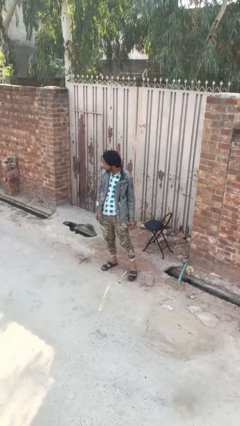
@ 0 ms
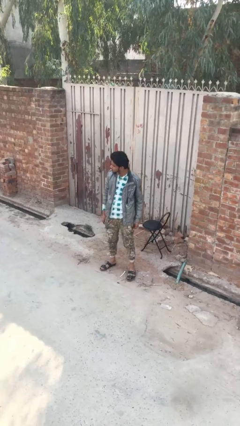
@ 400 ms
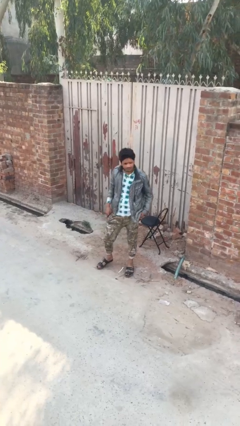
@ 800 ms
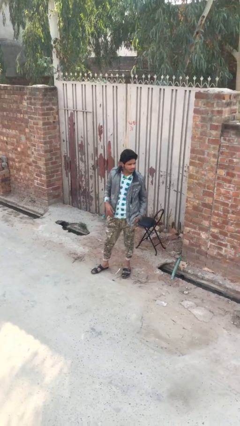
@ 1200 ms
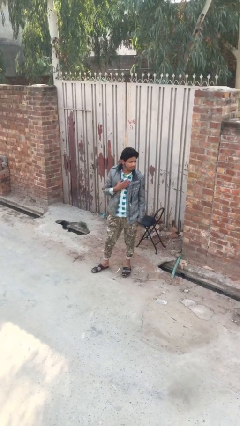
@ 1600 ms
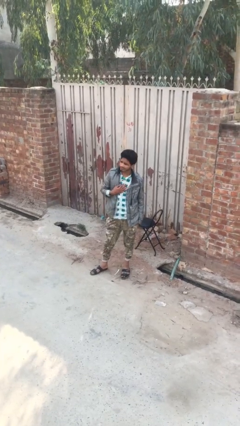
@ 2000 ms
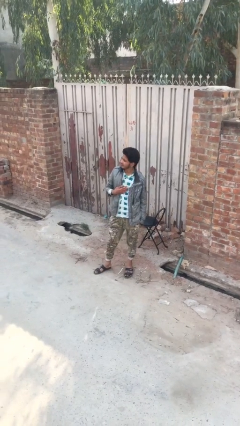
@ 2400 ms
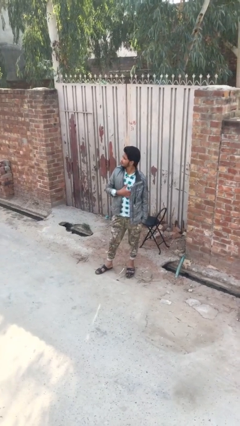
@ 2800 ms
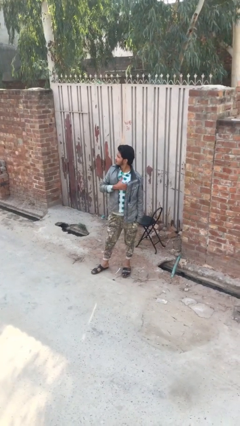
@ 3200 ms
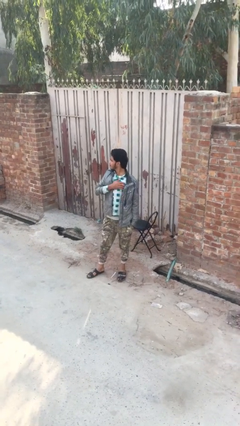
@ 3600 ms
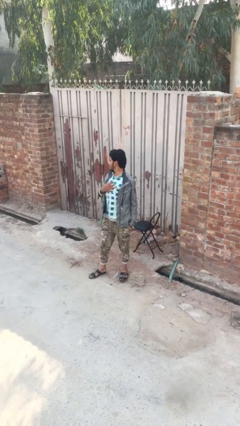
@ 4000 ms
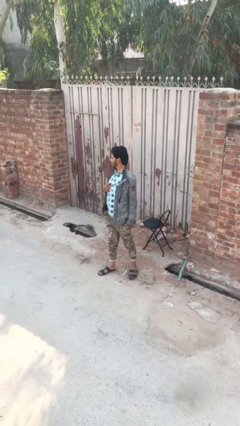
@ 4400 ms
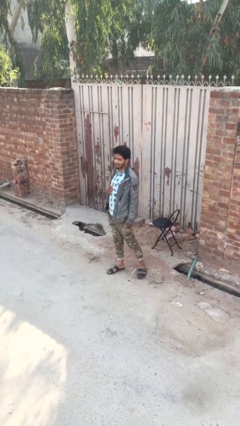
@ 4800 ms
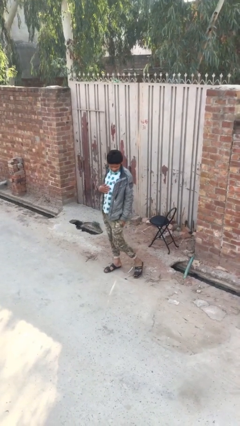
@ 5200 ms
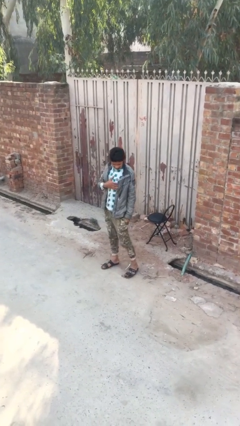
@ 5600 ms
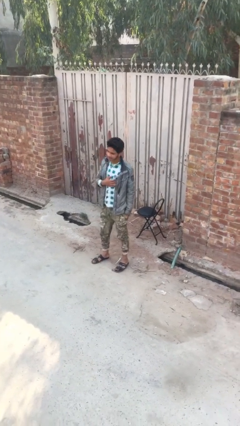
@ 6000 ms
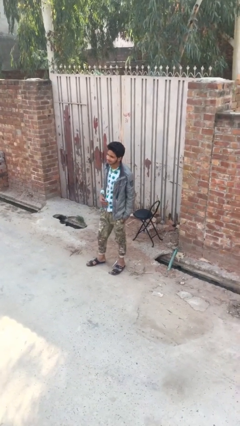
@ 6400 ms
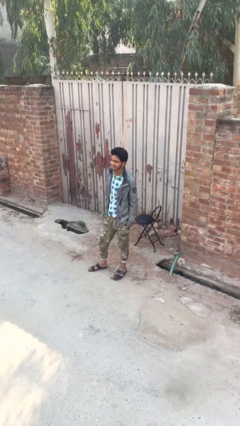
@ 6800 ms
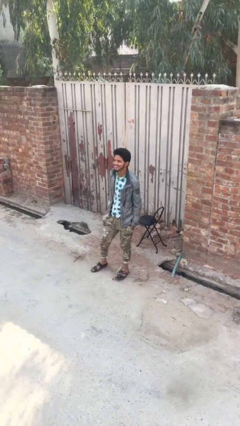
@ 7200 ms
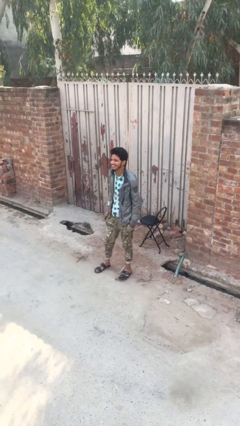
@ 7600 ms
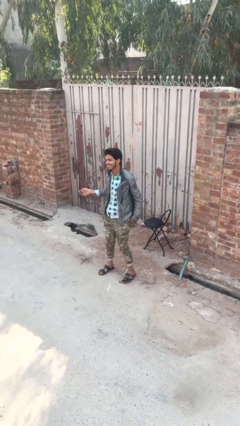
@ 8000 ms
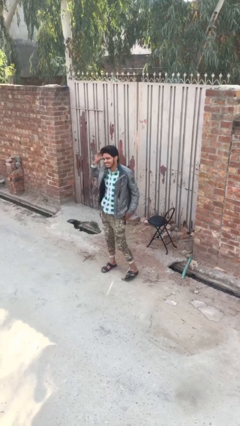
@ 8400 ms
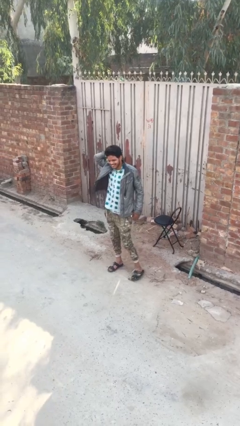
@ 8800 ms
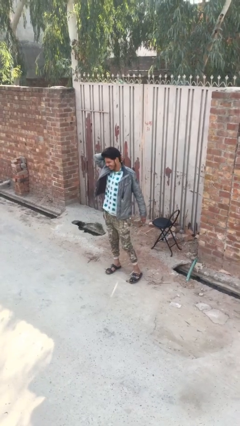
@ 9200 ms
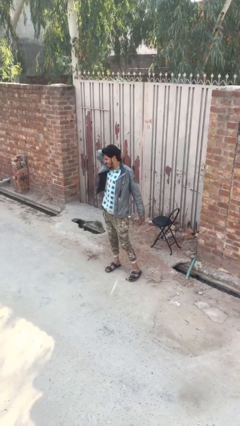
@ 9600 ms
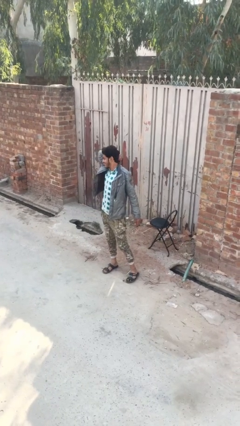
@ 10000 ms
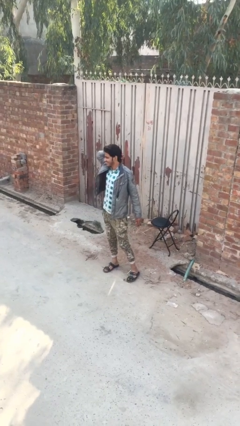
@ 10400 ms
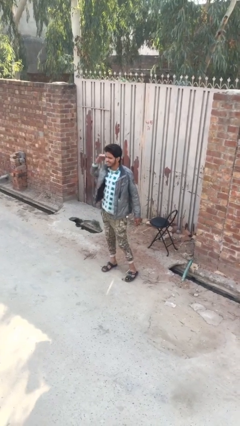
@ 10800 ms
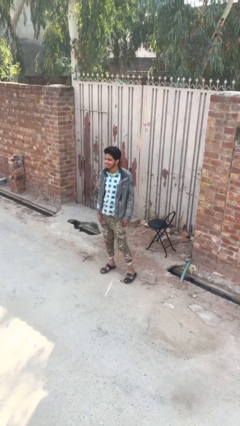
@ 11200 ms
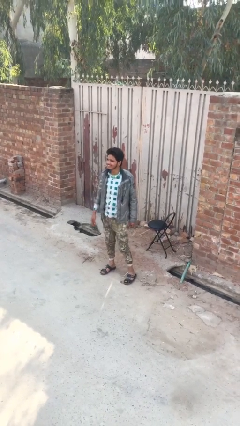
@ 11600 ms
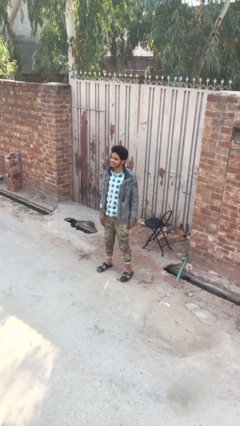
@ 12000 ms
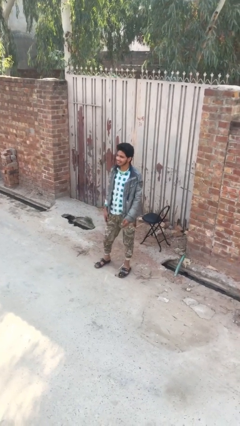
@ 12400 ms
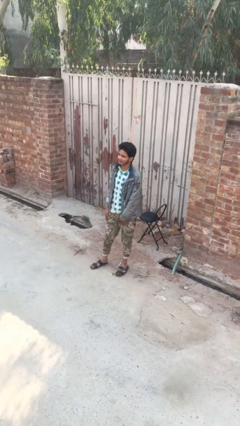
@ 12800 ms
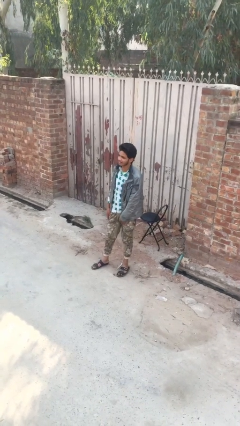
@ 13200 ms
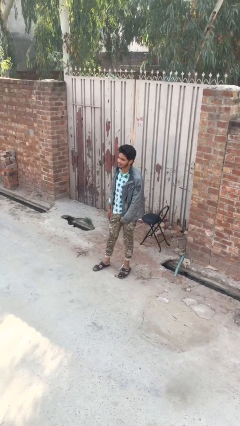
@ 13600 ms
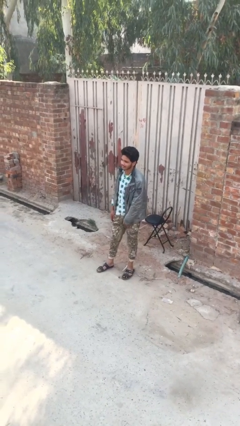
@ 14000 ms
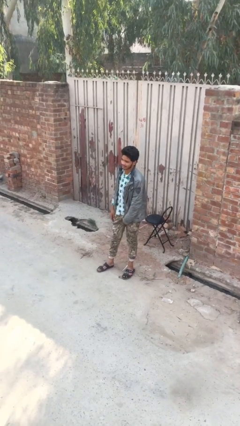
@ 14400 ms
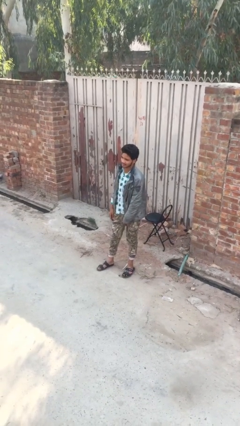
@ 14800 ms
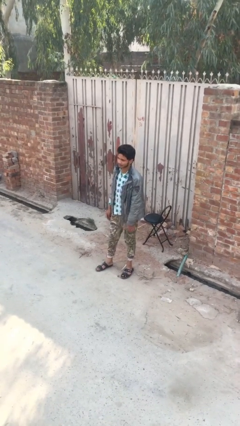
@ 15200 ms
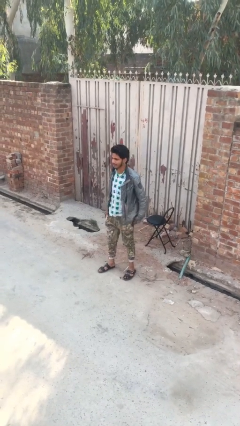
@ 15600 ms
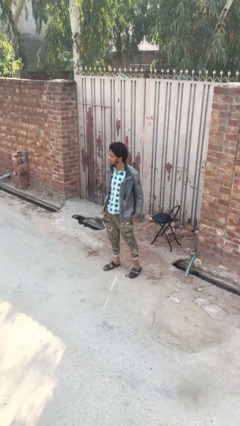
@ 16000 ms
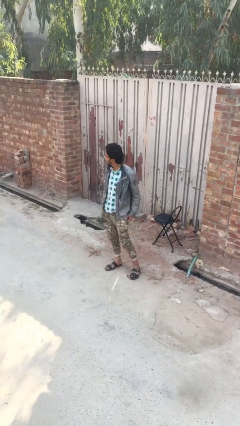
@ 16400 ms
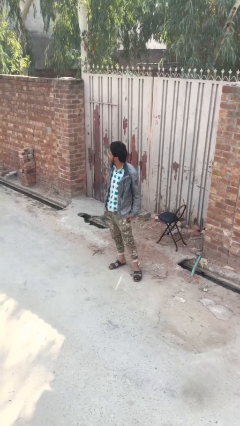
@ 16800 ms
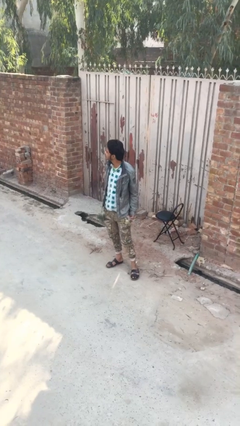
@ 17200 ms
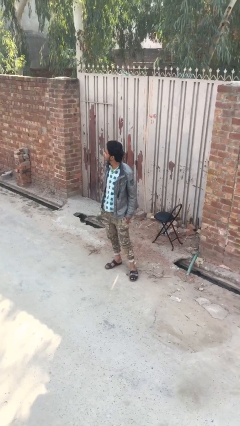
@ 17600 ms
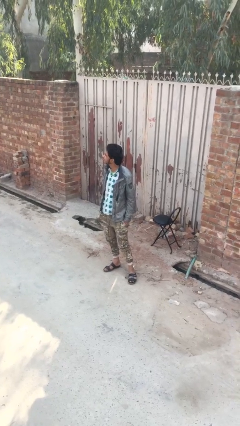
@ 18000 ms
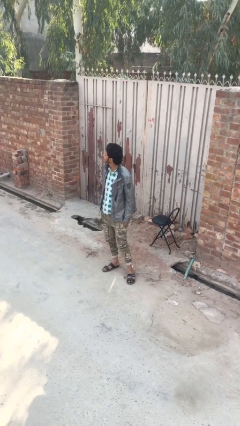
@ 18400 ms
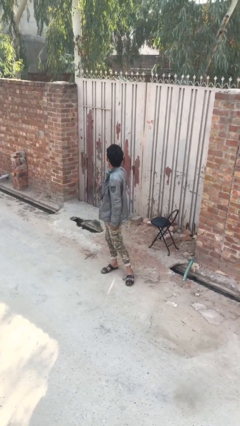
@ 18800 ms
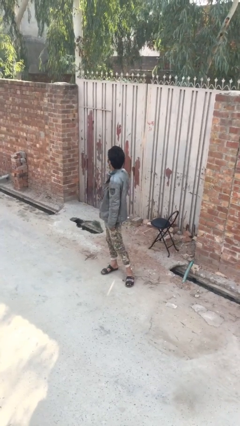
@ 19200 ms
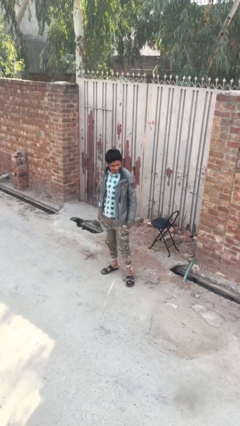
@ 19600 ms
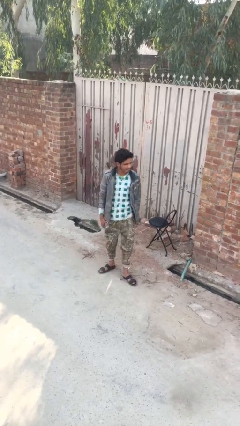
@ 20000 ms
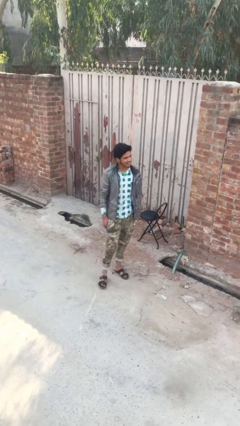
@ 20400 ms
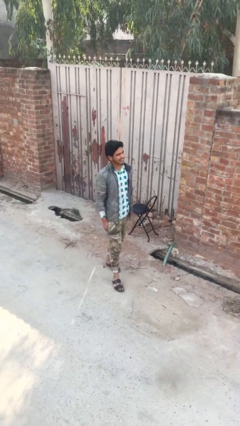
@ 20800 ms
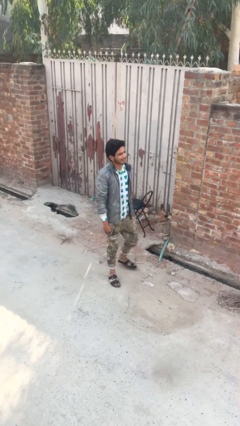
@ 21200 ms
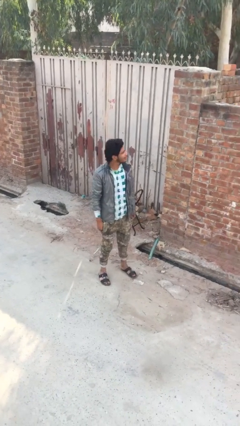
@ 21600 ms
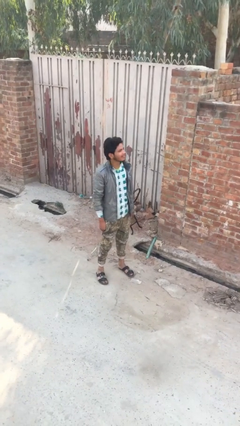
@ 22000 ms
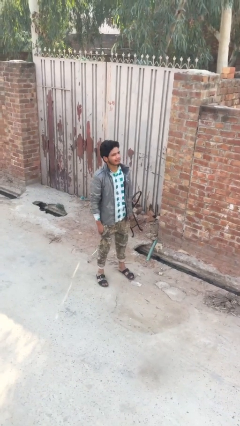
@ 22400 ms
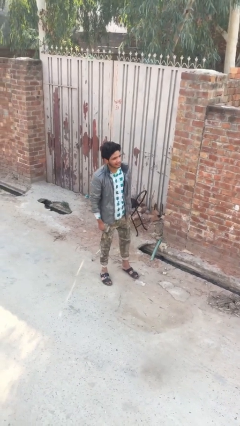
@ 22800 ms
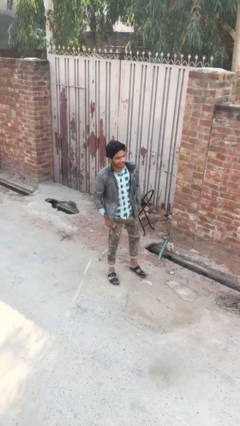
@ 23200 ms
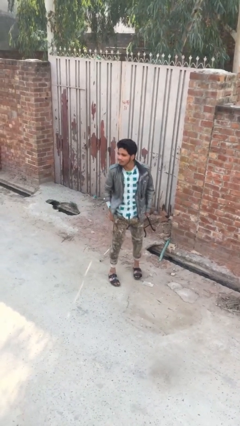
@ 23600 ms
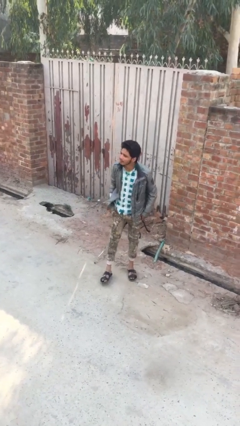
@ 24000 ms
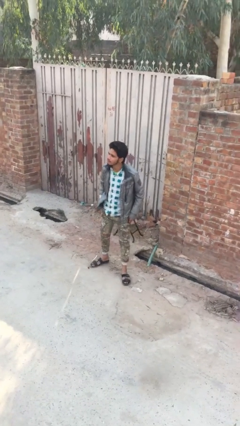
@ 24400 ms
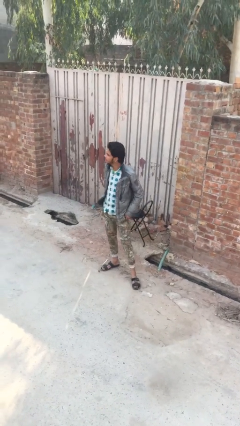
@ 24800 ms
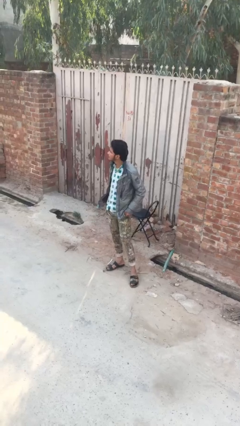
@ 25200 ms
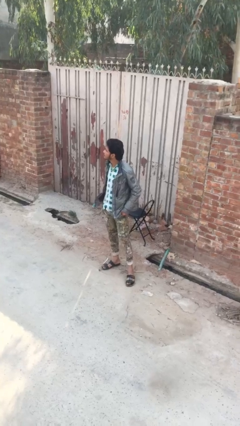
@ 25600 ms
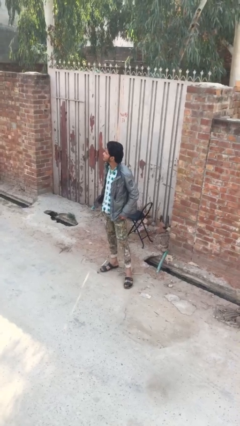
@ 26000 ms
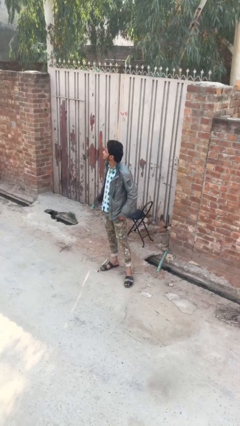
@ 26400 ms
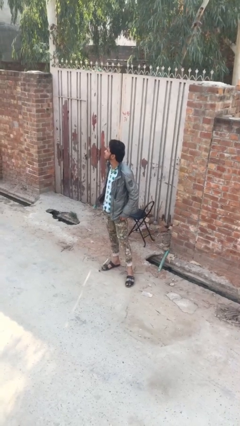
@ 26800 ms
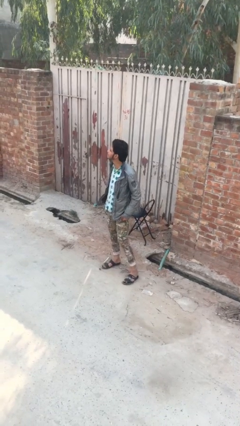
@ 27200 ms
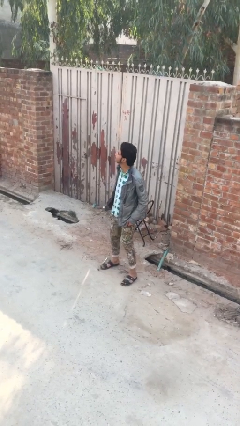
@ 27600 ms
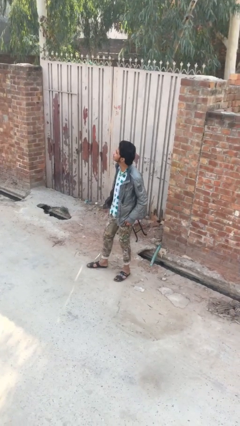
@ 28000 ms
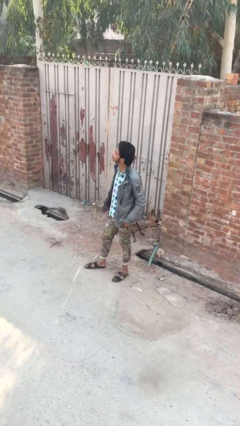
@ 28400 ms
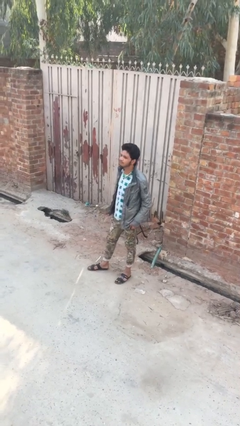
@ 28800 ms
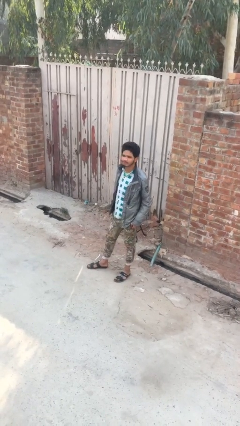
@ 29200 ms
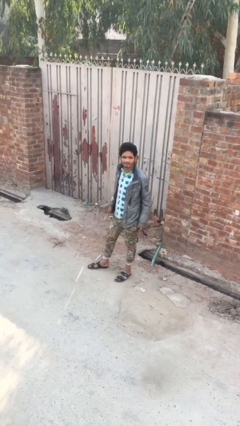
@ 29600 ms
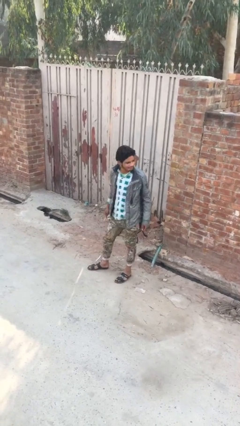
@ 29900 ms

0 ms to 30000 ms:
person walks

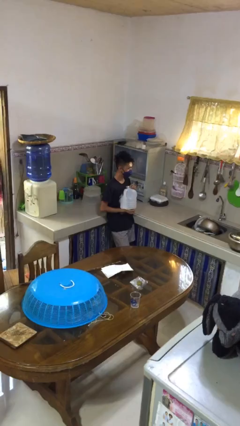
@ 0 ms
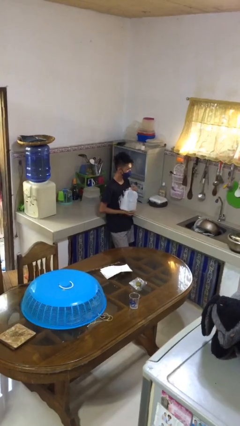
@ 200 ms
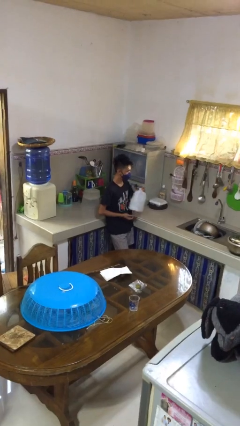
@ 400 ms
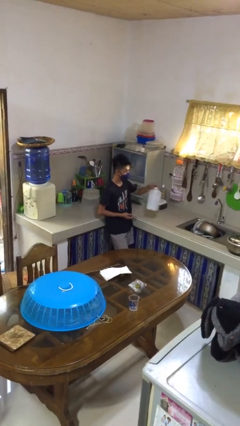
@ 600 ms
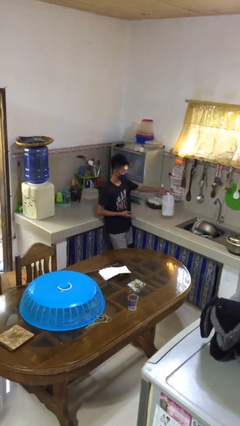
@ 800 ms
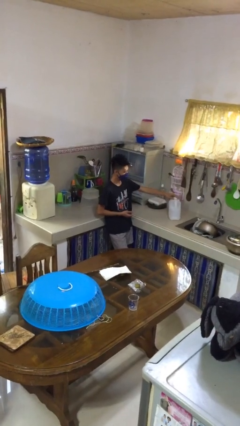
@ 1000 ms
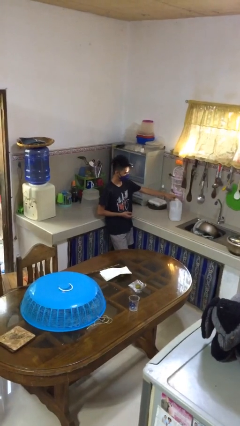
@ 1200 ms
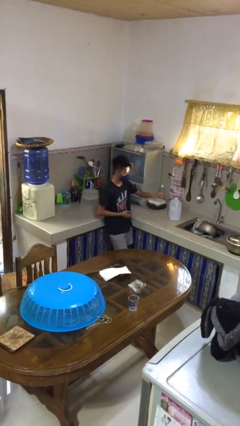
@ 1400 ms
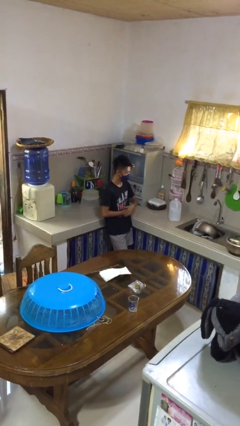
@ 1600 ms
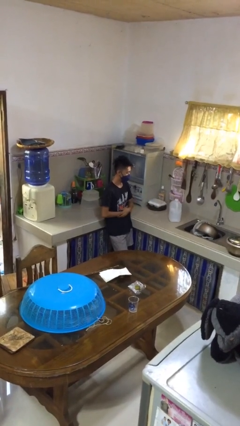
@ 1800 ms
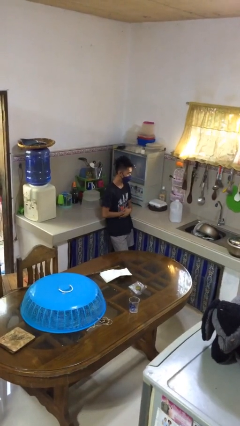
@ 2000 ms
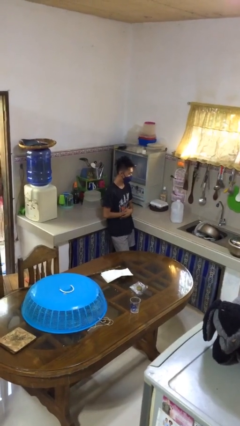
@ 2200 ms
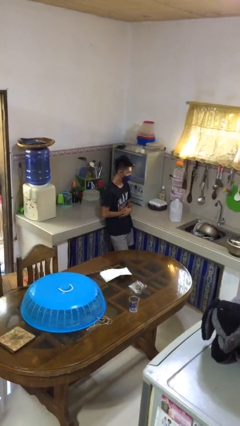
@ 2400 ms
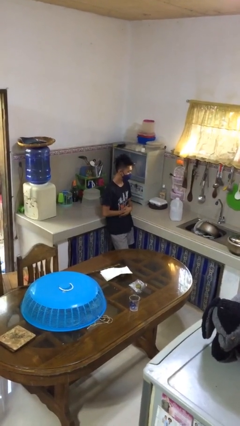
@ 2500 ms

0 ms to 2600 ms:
person picks up object from countertop

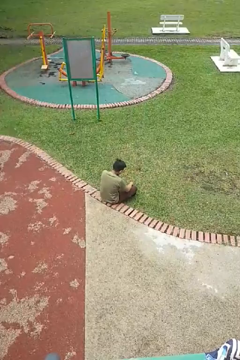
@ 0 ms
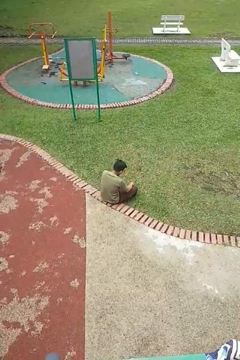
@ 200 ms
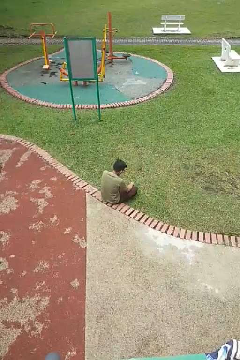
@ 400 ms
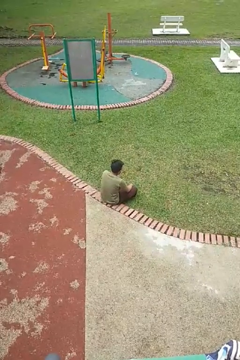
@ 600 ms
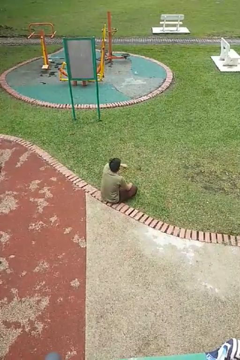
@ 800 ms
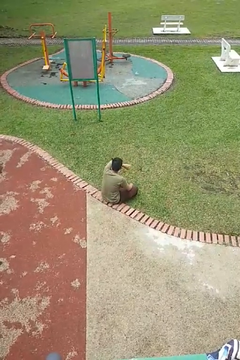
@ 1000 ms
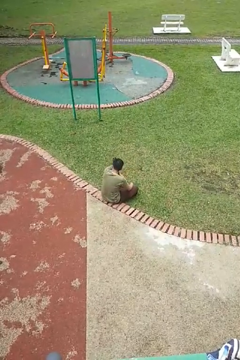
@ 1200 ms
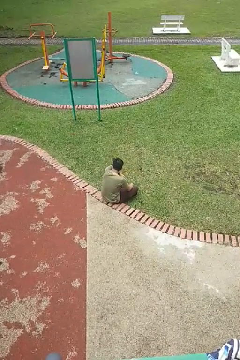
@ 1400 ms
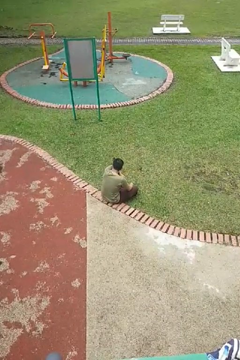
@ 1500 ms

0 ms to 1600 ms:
person sneezes into arm
